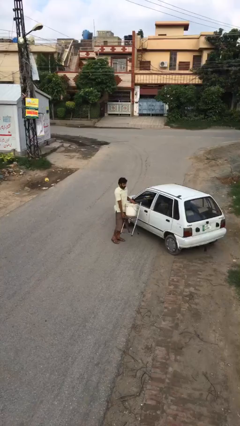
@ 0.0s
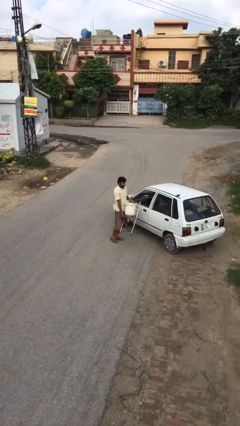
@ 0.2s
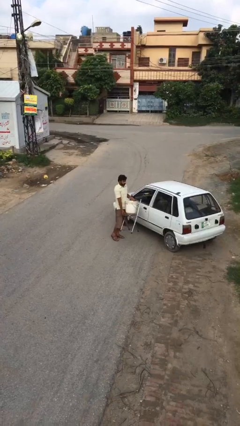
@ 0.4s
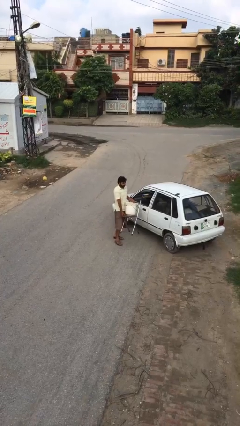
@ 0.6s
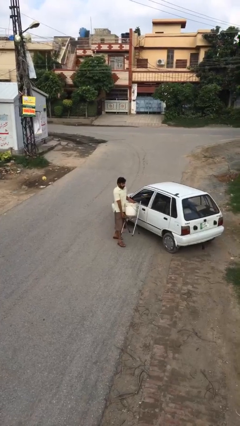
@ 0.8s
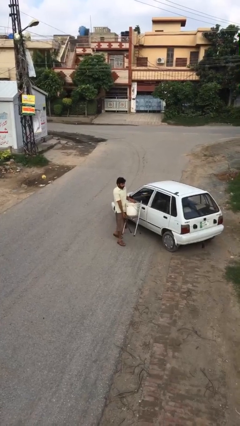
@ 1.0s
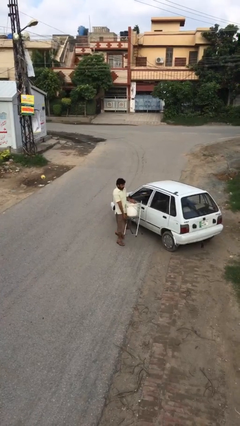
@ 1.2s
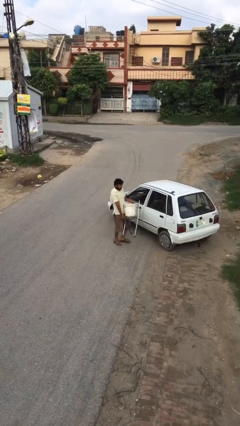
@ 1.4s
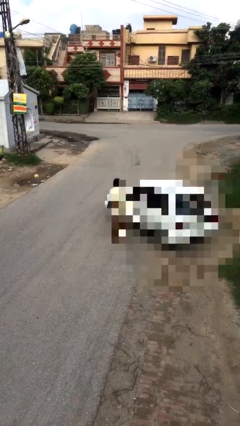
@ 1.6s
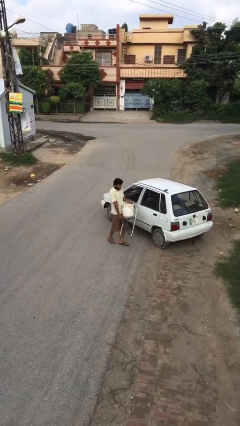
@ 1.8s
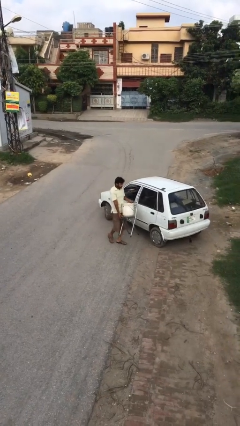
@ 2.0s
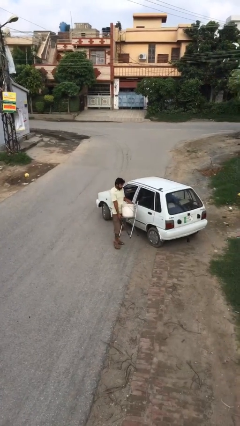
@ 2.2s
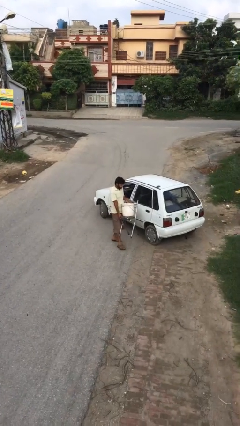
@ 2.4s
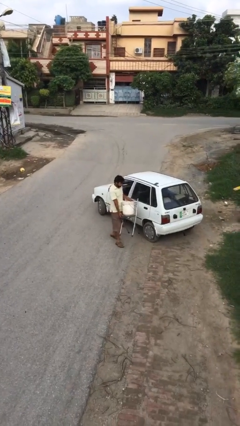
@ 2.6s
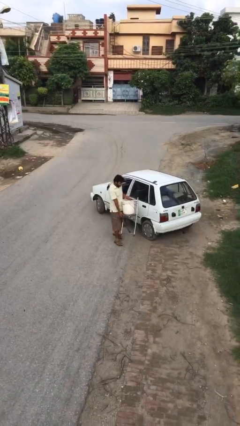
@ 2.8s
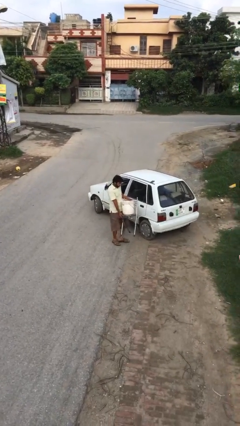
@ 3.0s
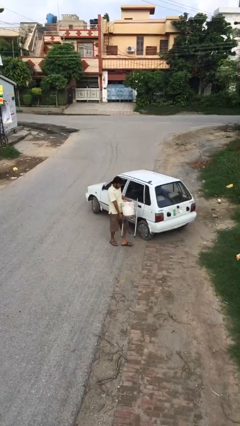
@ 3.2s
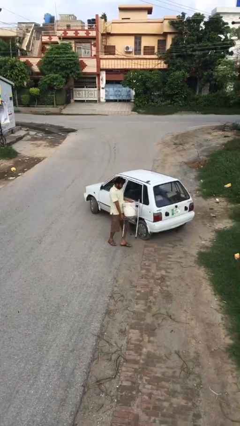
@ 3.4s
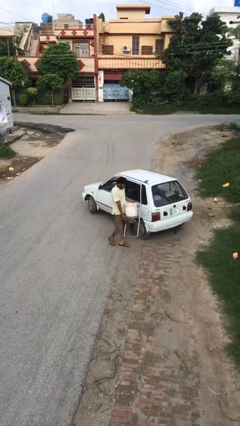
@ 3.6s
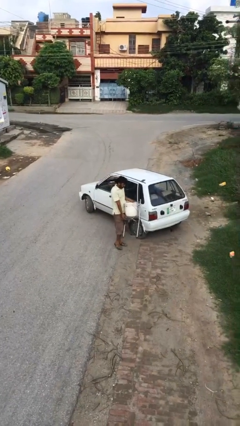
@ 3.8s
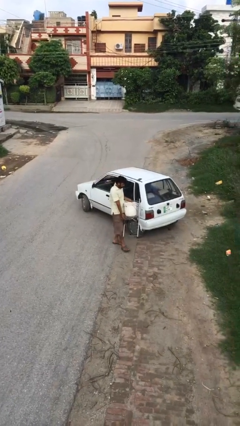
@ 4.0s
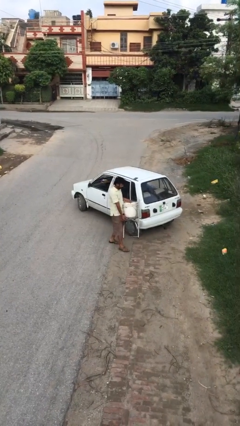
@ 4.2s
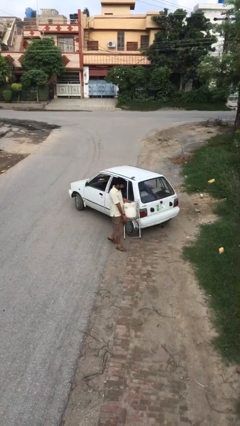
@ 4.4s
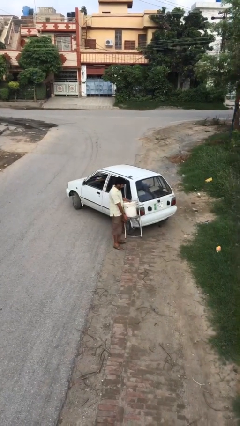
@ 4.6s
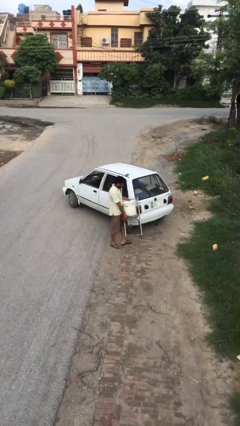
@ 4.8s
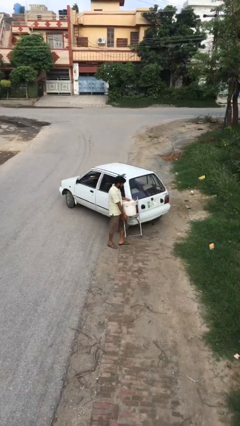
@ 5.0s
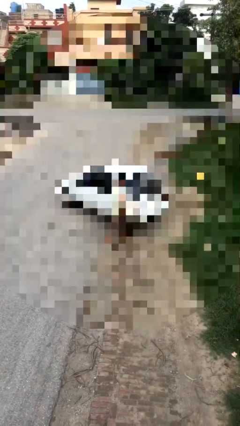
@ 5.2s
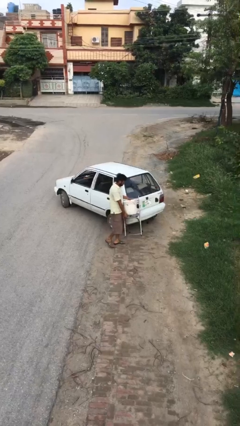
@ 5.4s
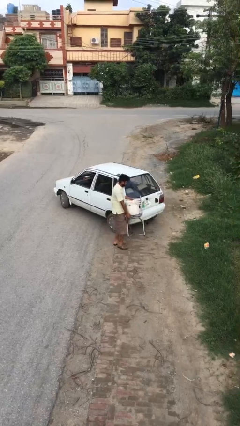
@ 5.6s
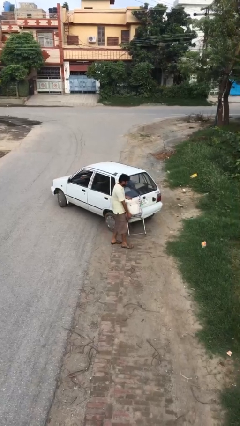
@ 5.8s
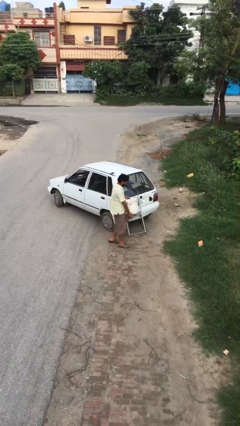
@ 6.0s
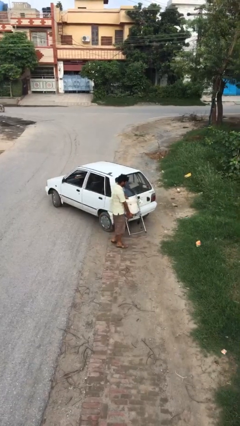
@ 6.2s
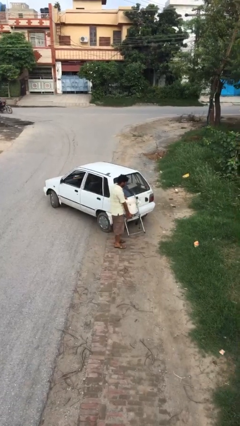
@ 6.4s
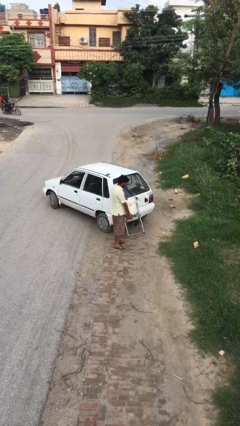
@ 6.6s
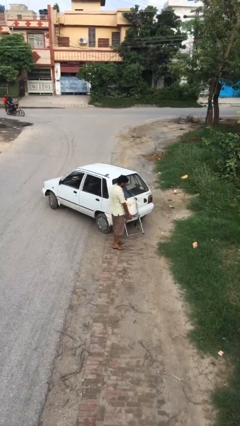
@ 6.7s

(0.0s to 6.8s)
person carries heavy object

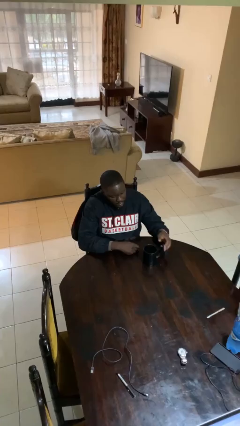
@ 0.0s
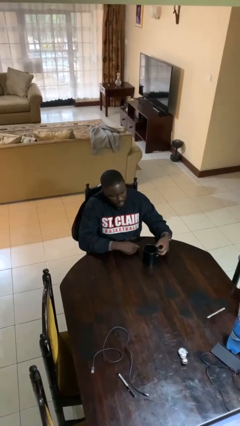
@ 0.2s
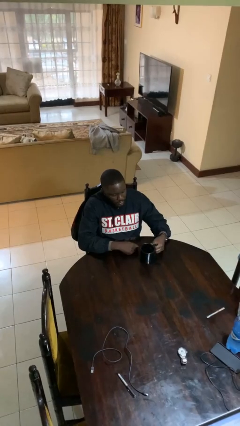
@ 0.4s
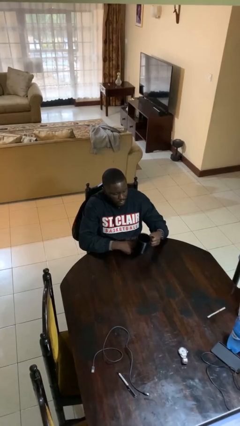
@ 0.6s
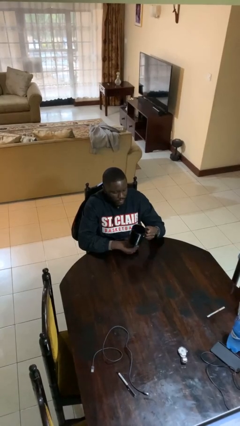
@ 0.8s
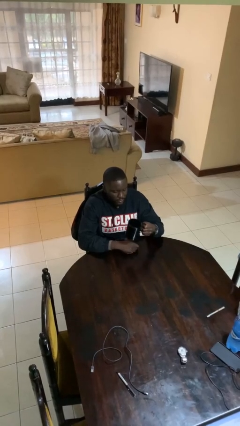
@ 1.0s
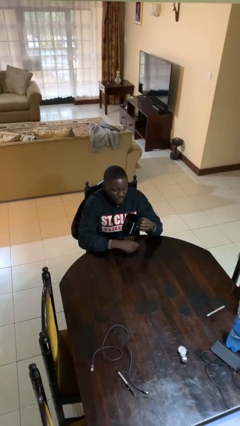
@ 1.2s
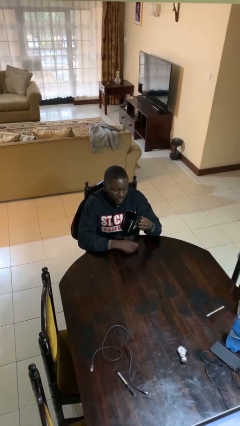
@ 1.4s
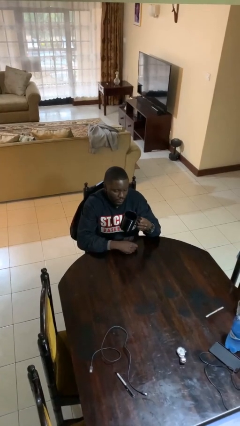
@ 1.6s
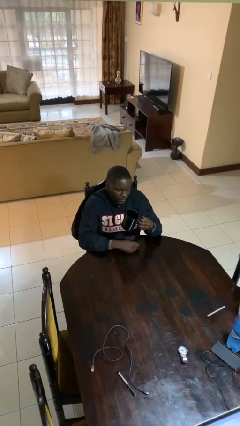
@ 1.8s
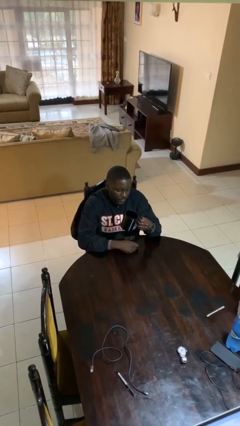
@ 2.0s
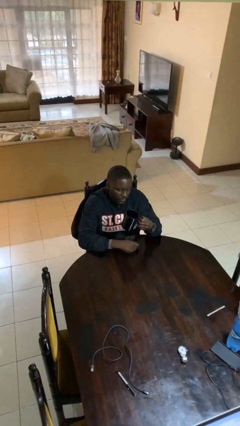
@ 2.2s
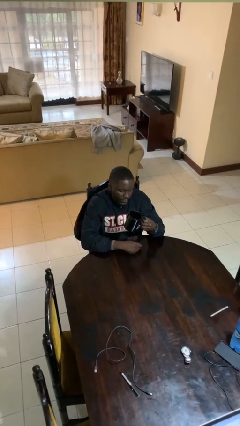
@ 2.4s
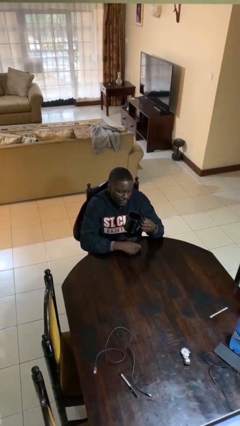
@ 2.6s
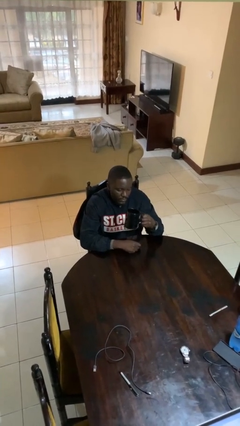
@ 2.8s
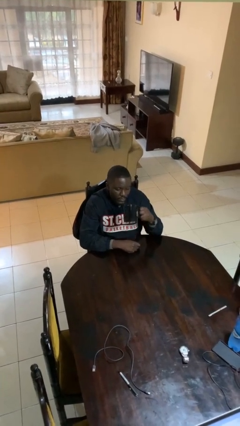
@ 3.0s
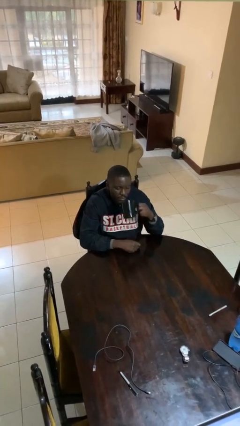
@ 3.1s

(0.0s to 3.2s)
person picks up object from table

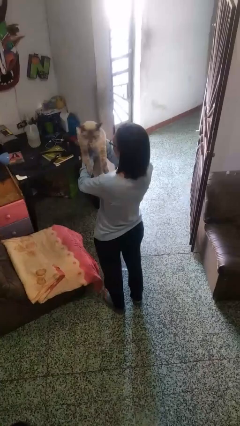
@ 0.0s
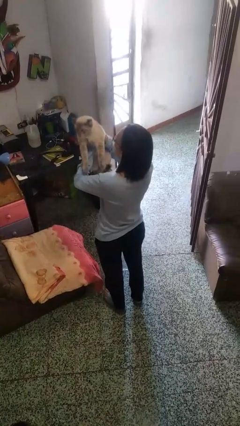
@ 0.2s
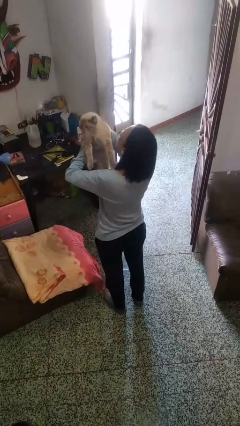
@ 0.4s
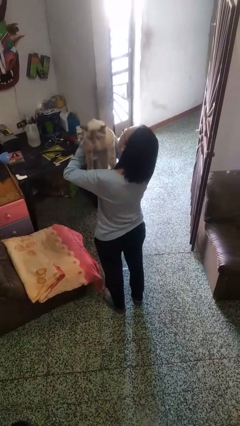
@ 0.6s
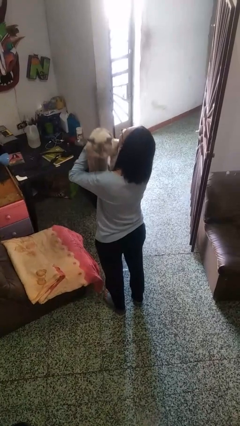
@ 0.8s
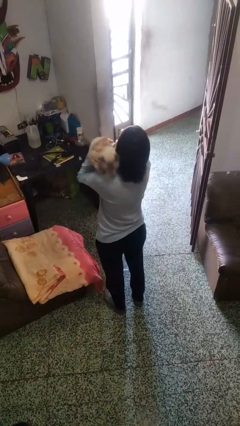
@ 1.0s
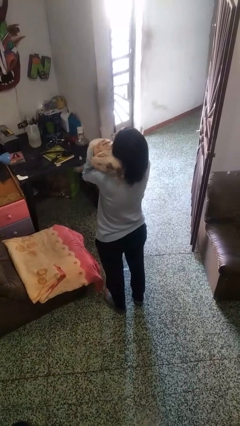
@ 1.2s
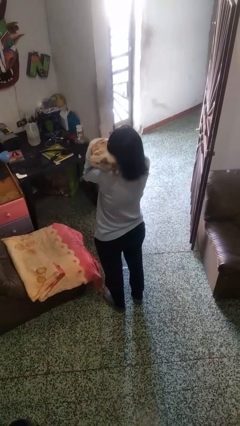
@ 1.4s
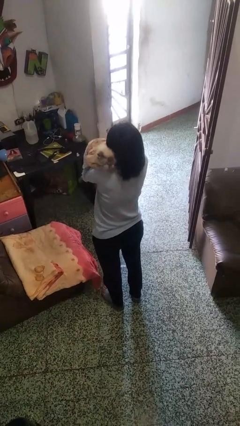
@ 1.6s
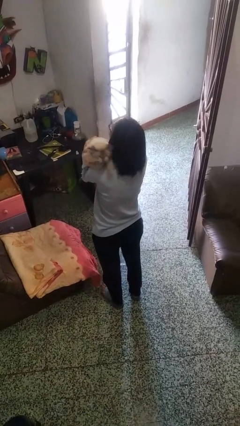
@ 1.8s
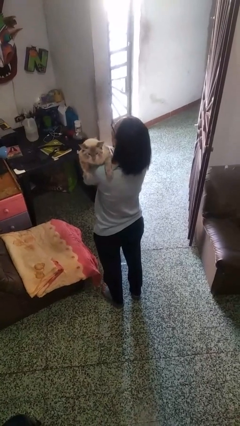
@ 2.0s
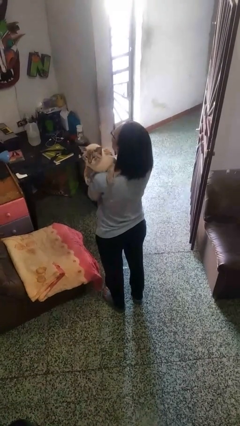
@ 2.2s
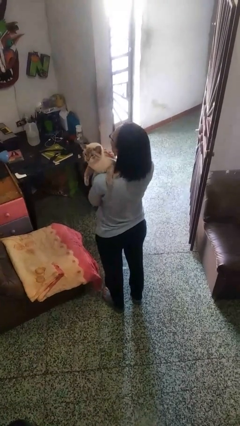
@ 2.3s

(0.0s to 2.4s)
person hugs cat

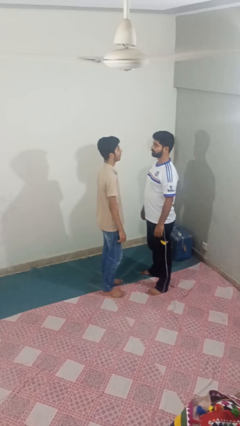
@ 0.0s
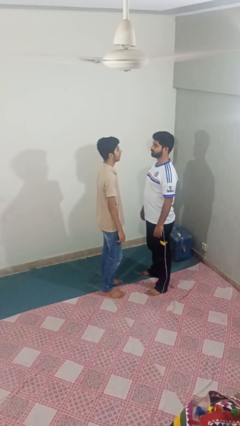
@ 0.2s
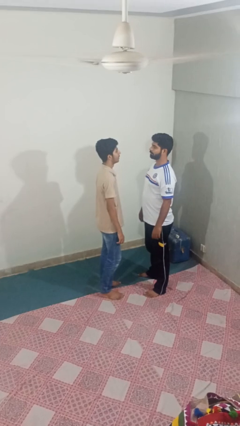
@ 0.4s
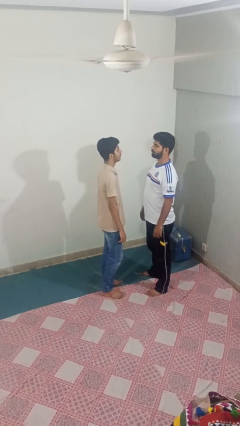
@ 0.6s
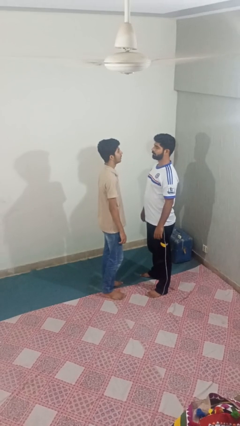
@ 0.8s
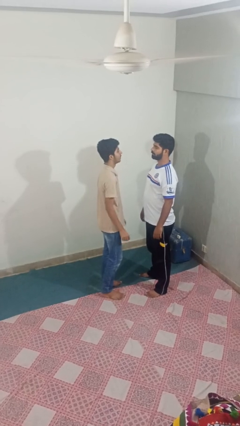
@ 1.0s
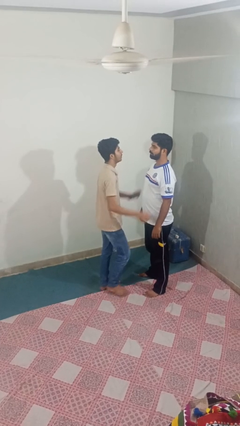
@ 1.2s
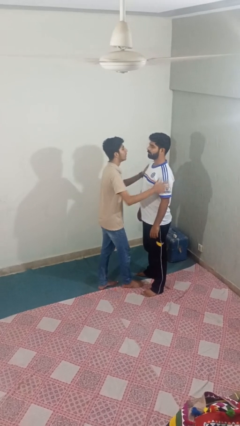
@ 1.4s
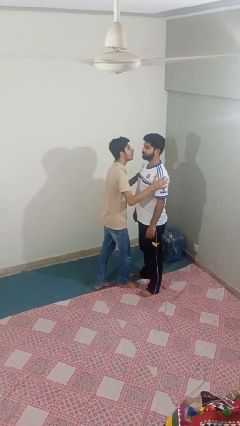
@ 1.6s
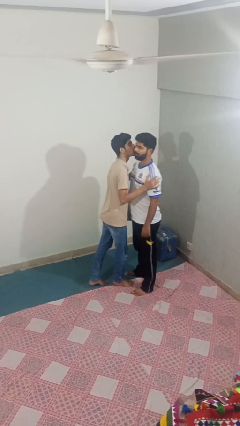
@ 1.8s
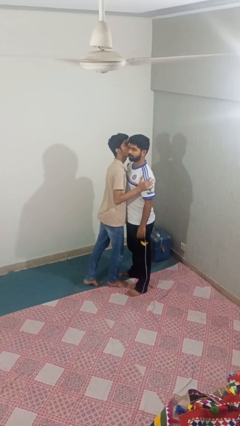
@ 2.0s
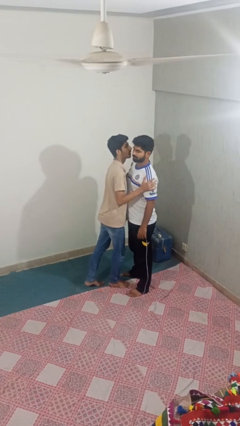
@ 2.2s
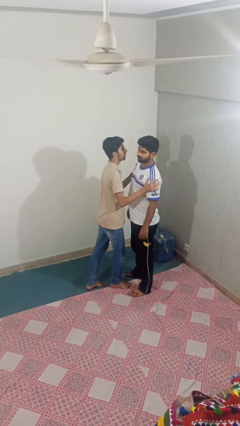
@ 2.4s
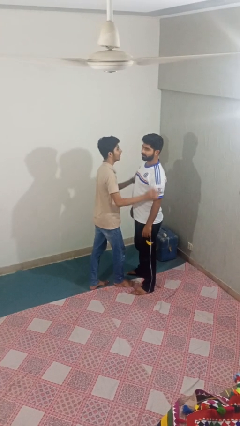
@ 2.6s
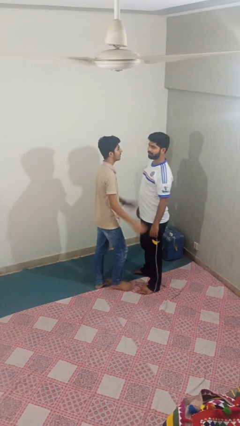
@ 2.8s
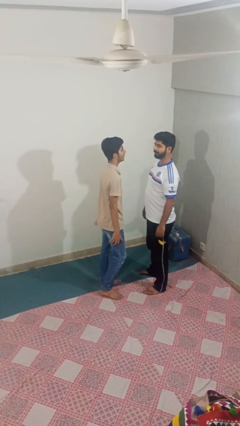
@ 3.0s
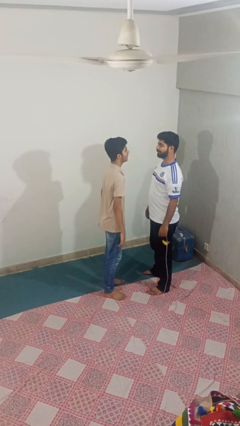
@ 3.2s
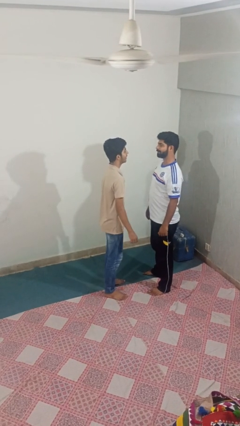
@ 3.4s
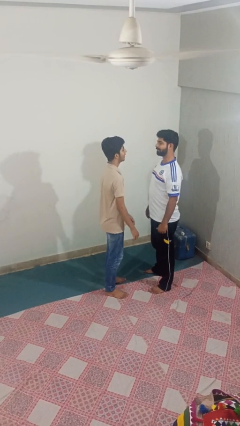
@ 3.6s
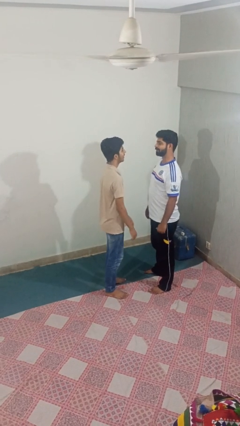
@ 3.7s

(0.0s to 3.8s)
person kisses cheek of person

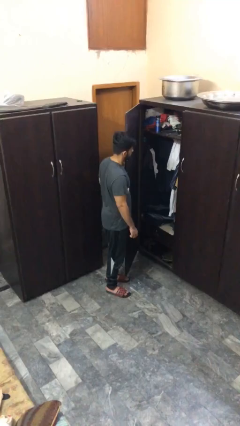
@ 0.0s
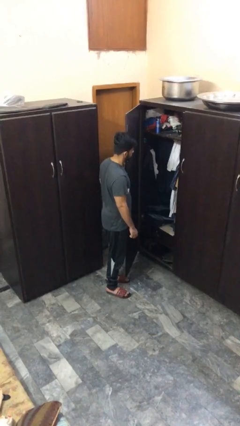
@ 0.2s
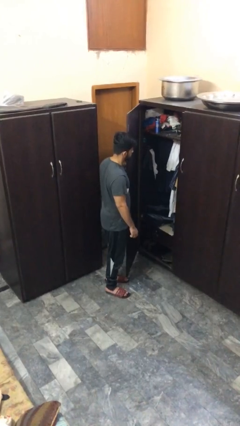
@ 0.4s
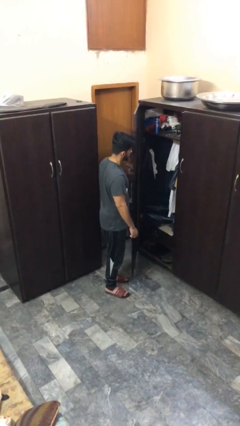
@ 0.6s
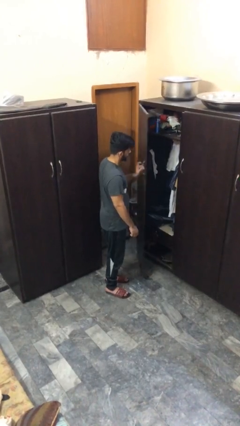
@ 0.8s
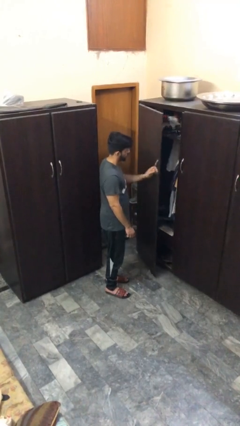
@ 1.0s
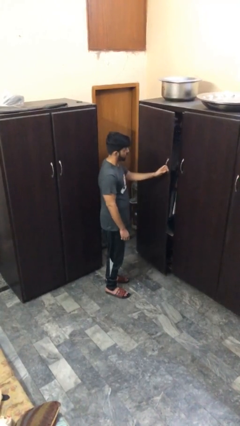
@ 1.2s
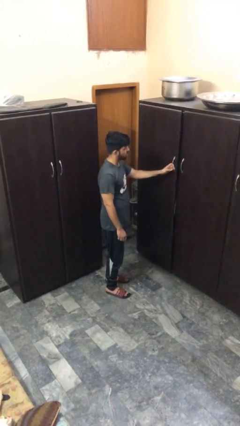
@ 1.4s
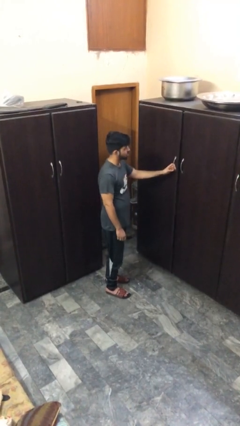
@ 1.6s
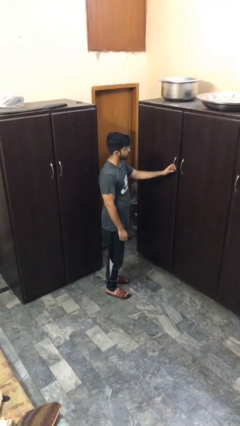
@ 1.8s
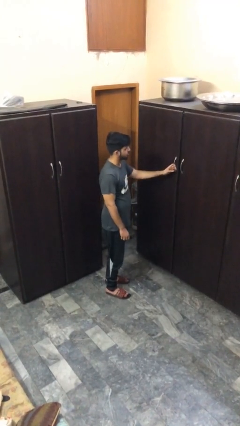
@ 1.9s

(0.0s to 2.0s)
person closes dresser drawer
